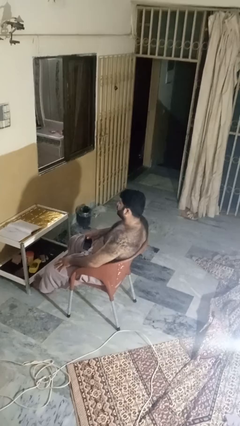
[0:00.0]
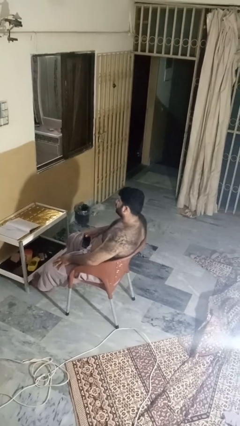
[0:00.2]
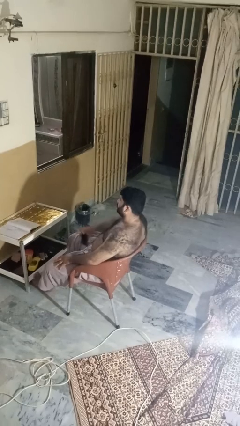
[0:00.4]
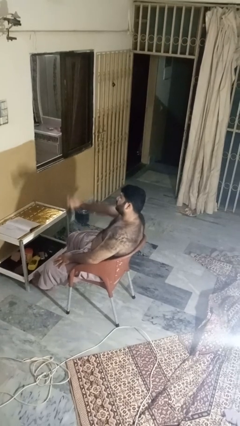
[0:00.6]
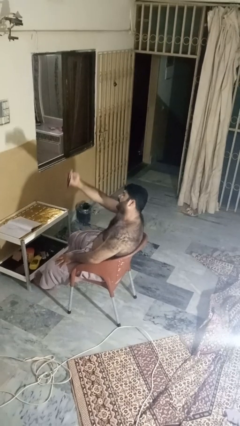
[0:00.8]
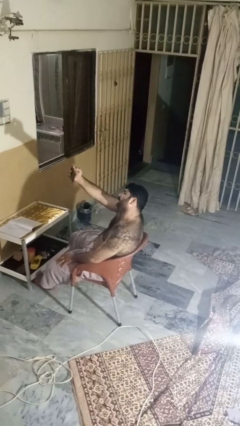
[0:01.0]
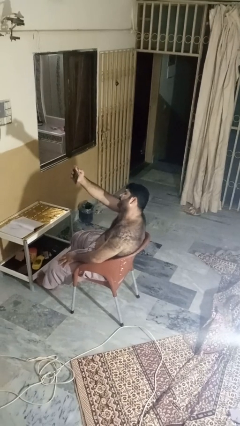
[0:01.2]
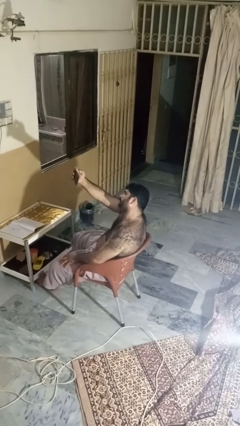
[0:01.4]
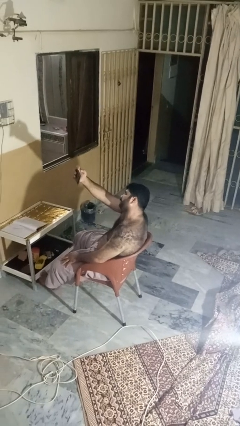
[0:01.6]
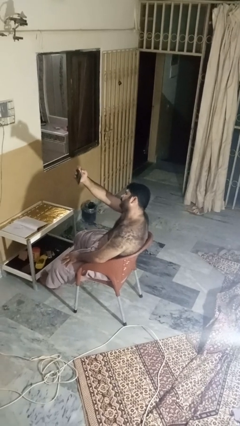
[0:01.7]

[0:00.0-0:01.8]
person takes selfie

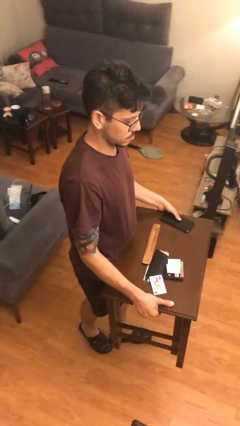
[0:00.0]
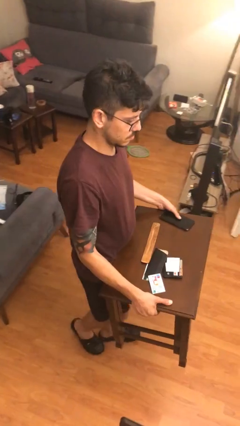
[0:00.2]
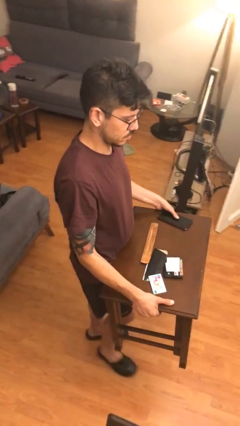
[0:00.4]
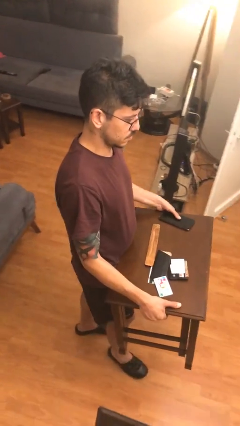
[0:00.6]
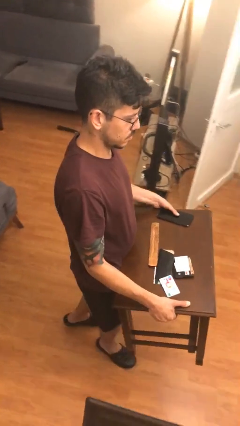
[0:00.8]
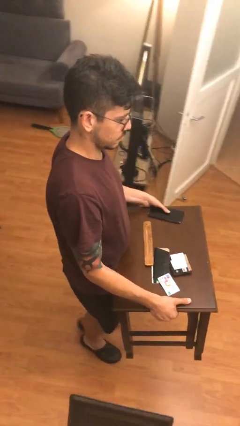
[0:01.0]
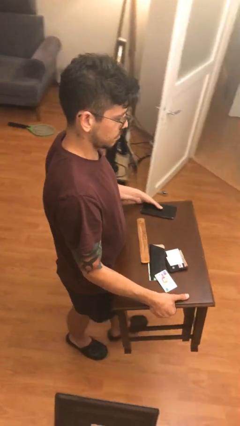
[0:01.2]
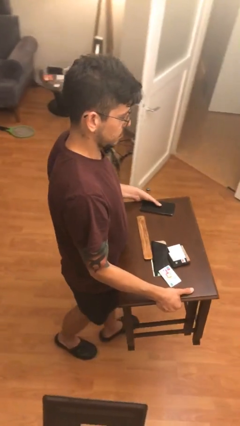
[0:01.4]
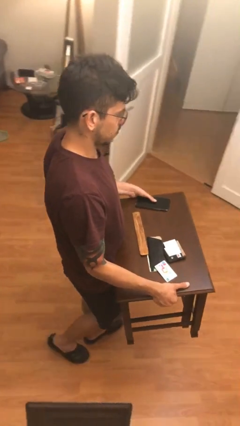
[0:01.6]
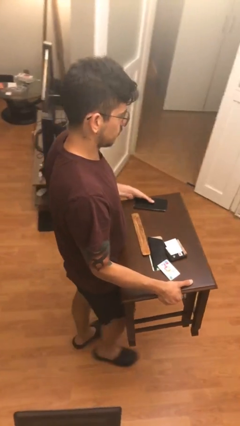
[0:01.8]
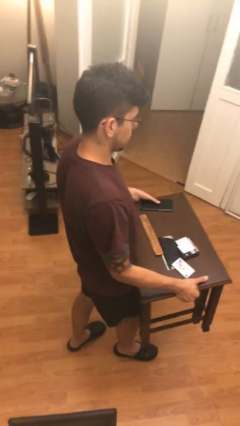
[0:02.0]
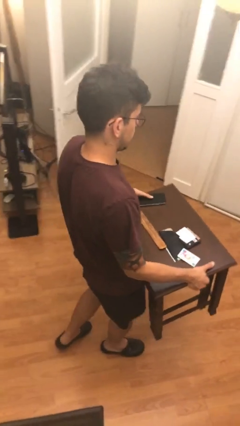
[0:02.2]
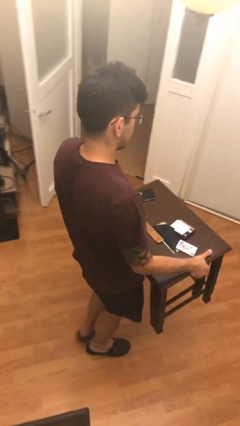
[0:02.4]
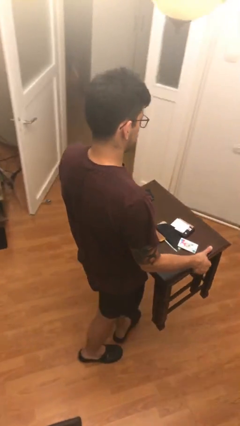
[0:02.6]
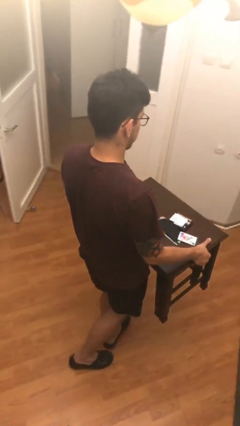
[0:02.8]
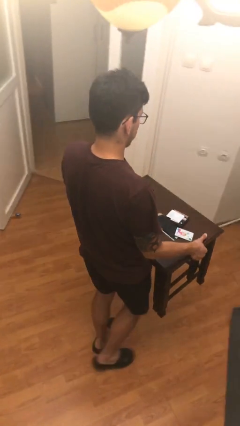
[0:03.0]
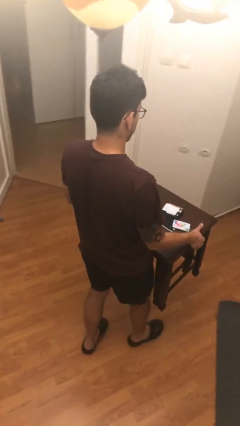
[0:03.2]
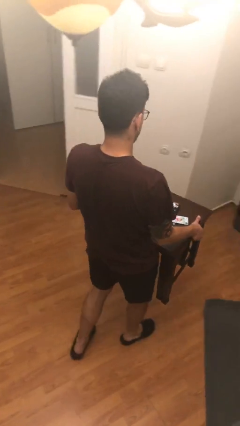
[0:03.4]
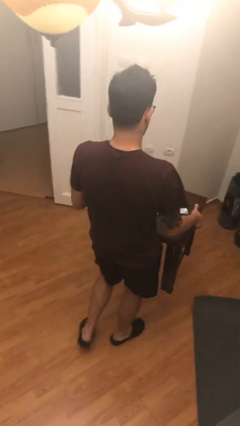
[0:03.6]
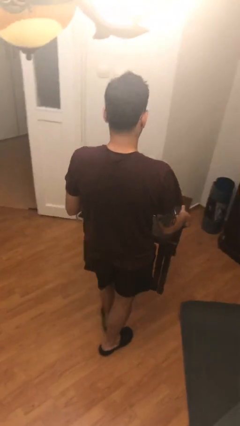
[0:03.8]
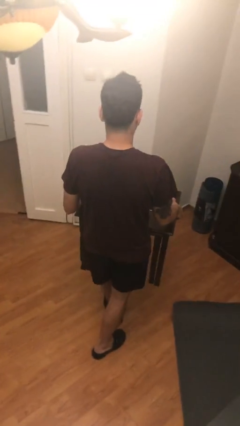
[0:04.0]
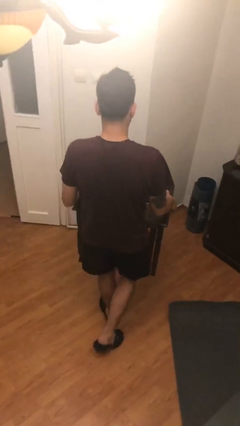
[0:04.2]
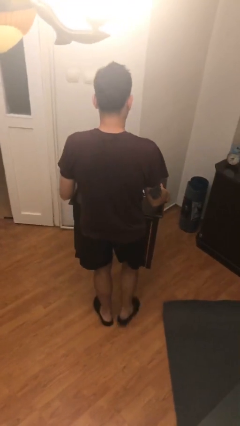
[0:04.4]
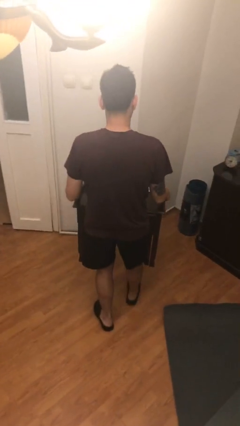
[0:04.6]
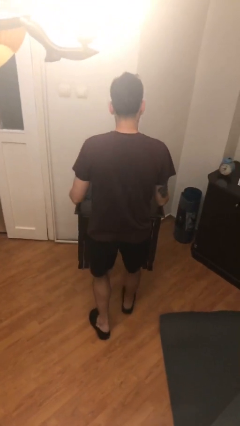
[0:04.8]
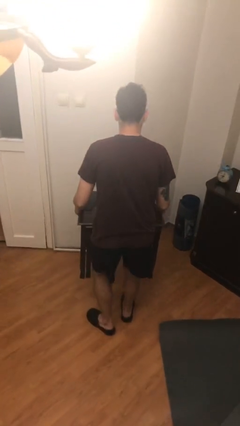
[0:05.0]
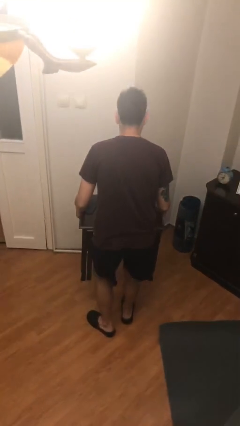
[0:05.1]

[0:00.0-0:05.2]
person carries heavy object

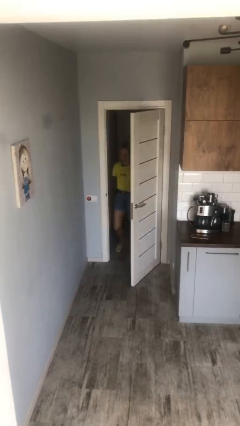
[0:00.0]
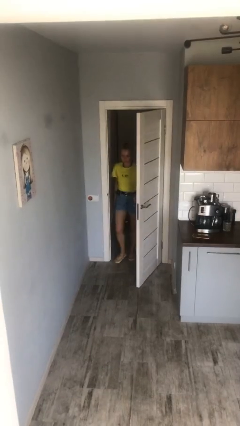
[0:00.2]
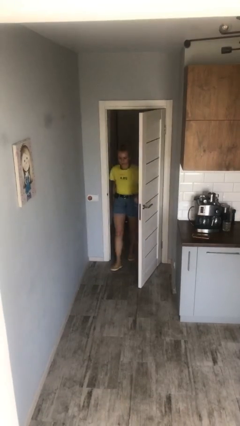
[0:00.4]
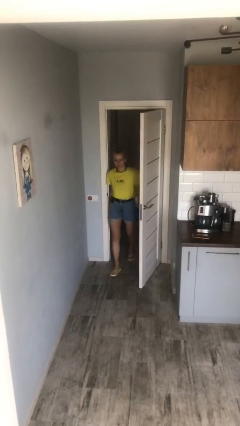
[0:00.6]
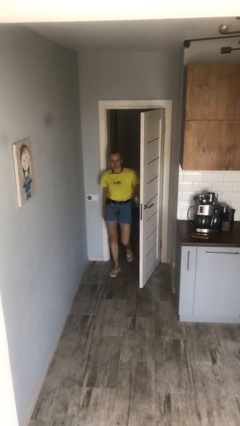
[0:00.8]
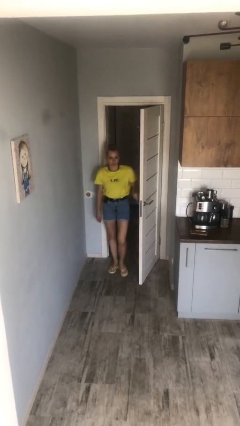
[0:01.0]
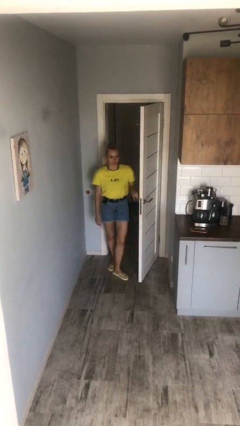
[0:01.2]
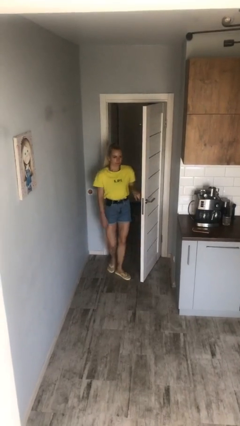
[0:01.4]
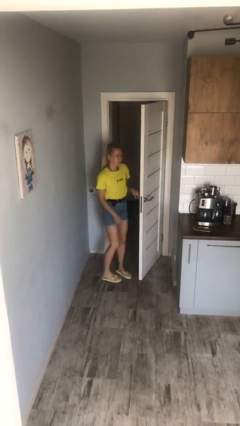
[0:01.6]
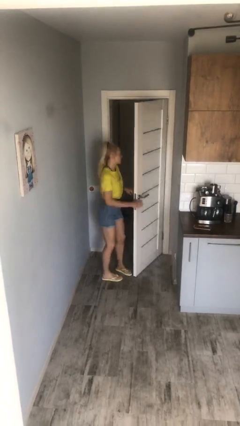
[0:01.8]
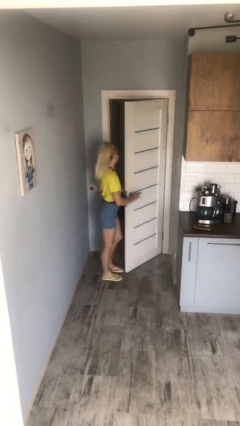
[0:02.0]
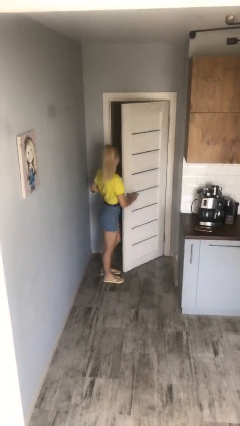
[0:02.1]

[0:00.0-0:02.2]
person enters scene through structure

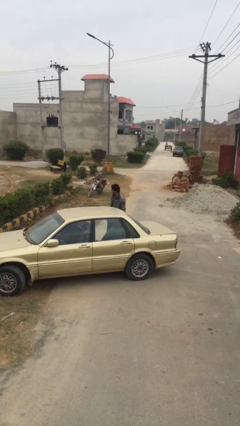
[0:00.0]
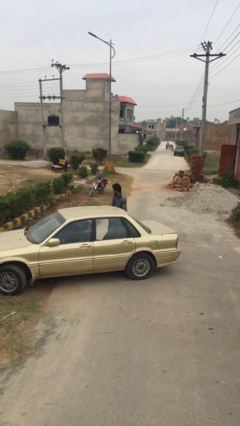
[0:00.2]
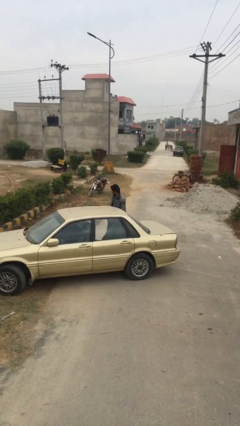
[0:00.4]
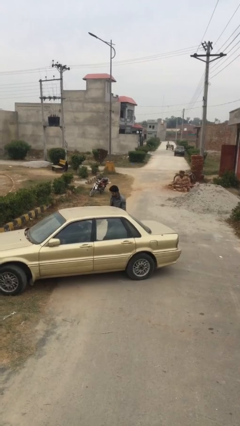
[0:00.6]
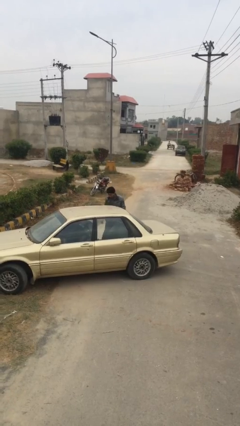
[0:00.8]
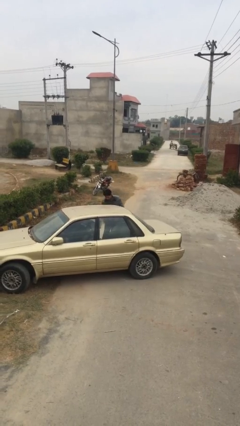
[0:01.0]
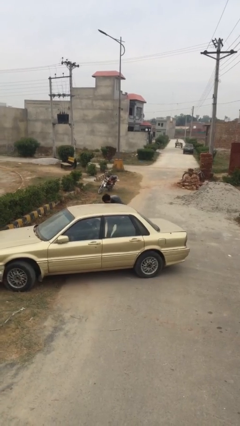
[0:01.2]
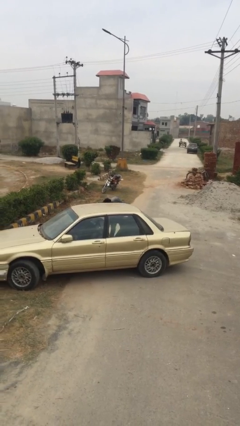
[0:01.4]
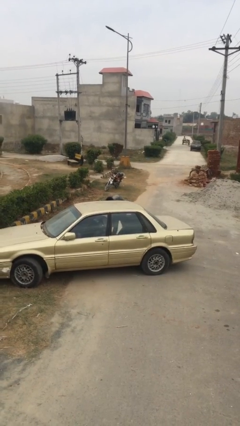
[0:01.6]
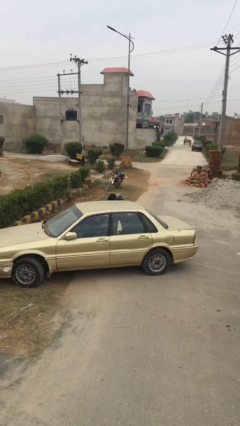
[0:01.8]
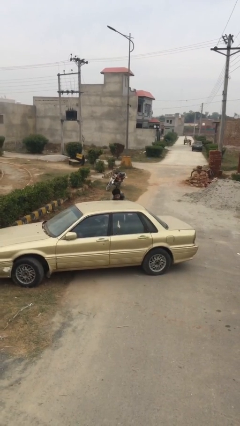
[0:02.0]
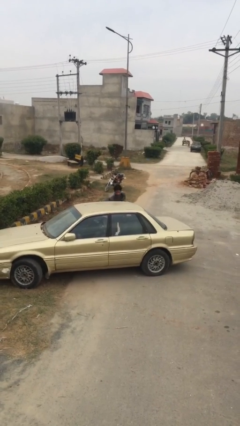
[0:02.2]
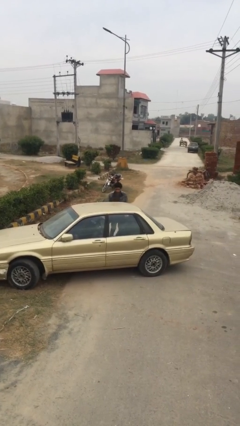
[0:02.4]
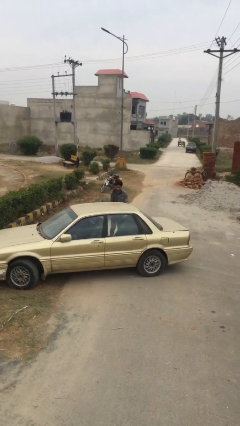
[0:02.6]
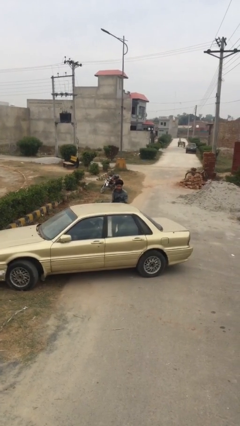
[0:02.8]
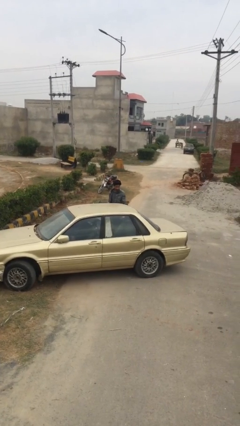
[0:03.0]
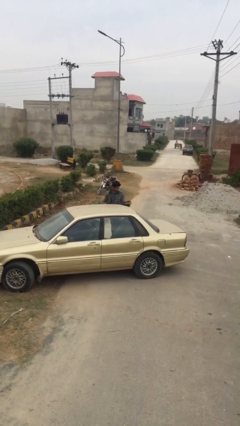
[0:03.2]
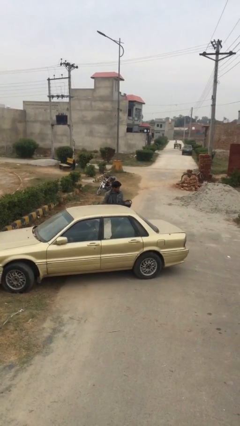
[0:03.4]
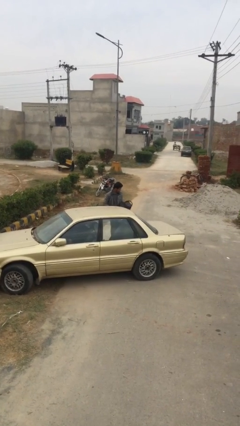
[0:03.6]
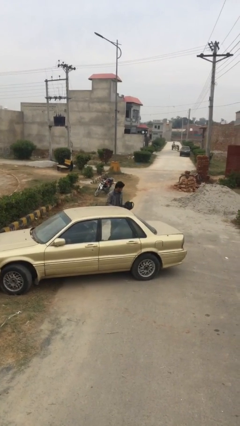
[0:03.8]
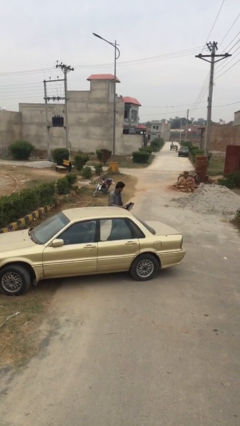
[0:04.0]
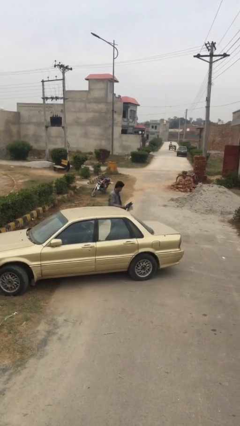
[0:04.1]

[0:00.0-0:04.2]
person unloads car

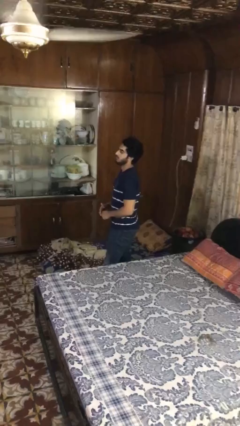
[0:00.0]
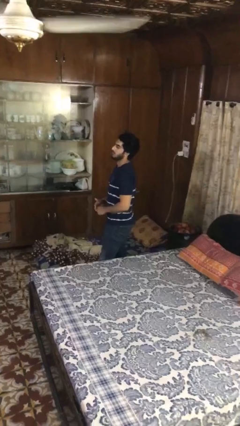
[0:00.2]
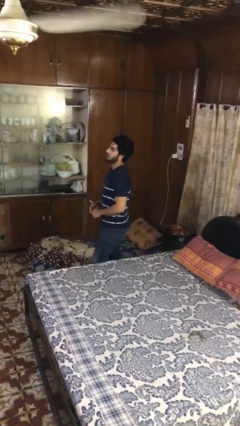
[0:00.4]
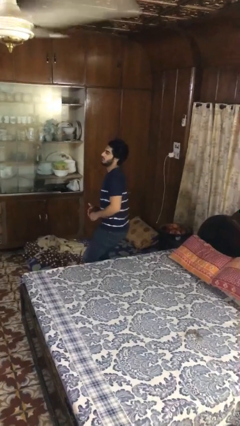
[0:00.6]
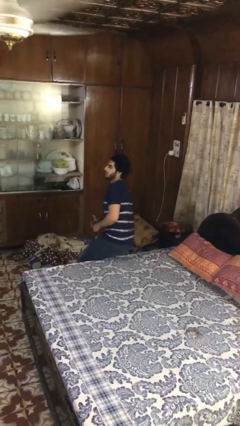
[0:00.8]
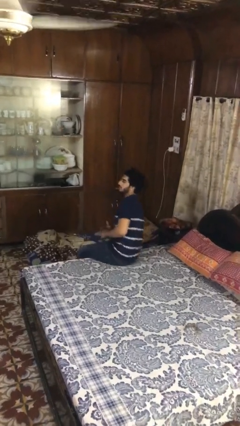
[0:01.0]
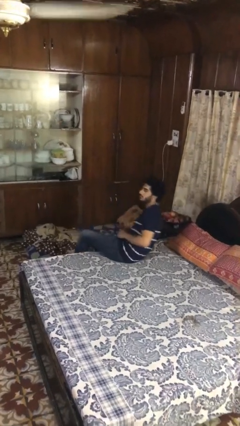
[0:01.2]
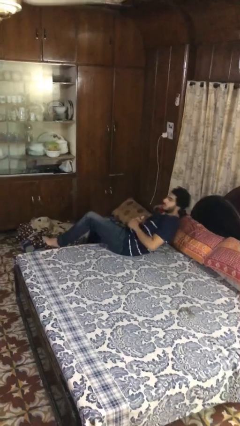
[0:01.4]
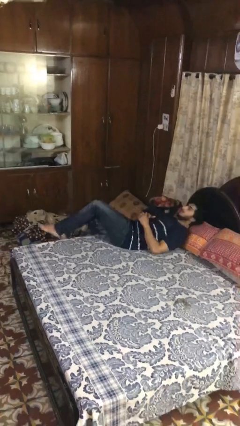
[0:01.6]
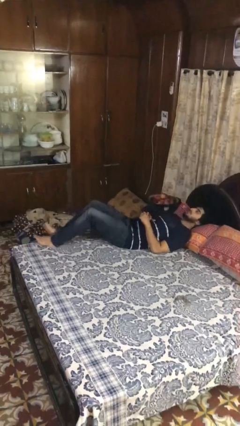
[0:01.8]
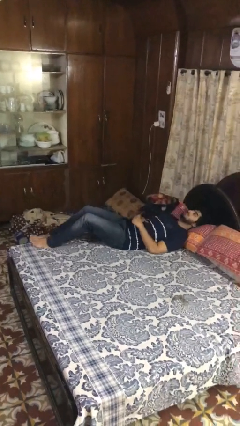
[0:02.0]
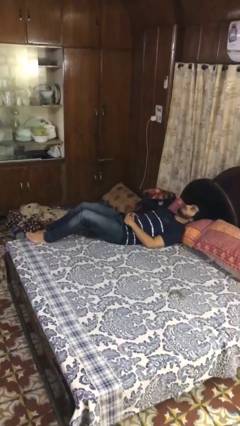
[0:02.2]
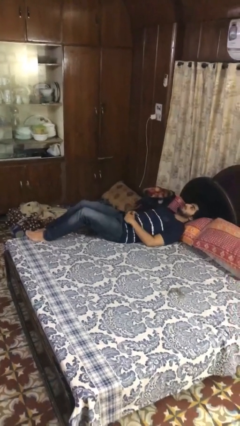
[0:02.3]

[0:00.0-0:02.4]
person lies down on bed

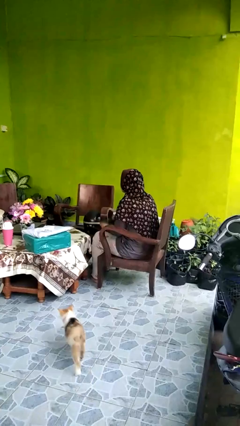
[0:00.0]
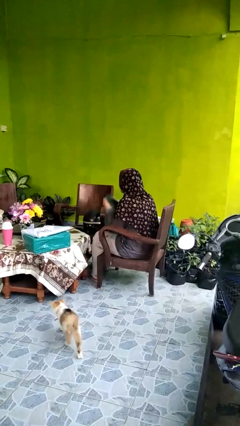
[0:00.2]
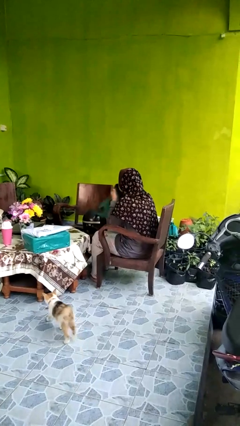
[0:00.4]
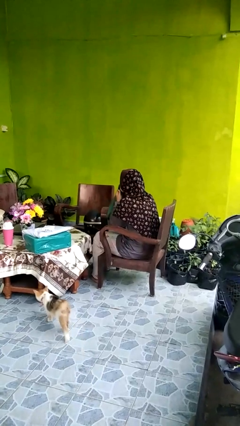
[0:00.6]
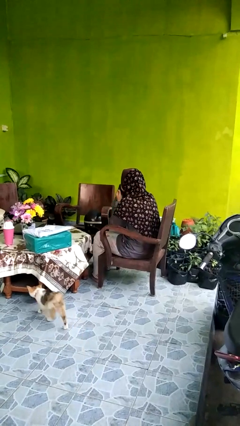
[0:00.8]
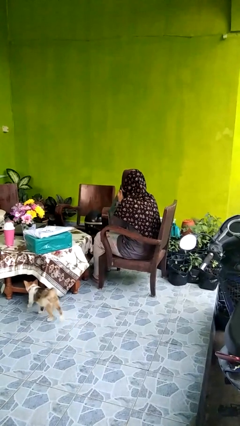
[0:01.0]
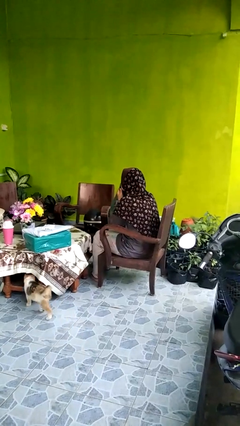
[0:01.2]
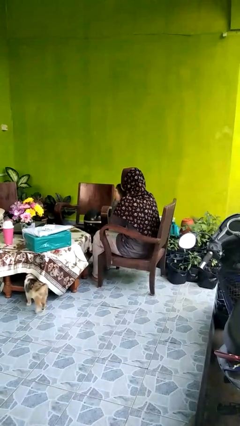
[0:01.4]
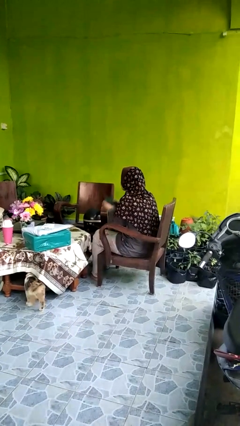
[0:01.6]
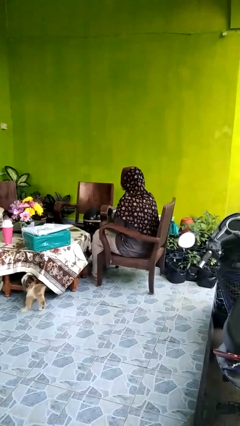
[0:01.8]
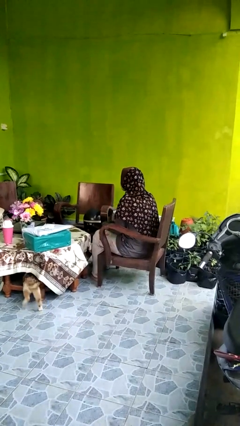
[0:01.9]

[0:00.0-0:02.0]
person wipes mouth with napkin
